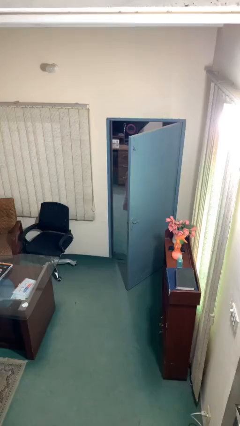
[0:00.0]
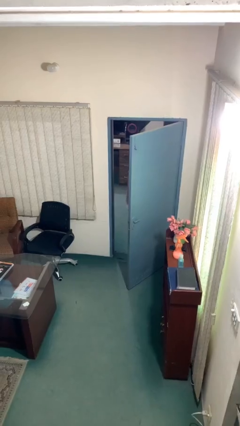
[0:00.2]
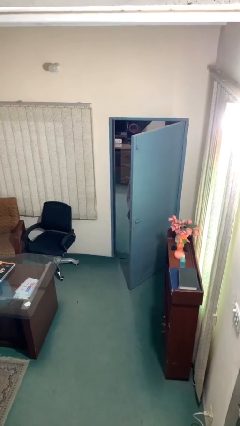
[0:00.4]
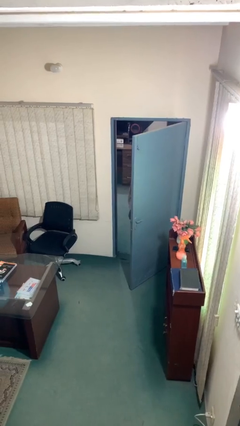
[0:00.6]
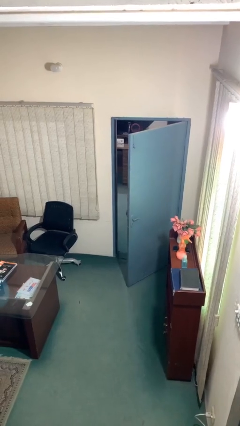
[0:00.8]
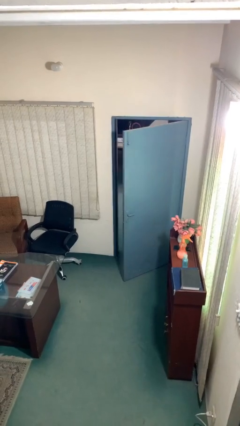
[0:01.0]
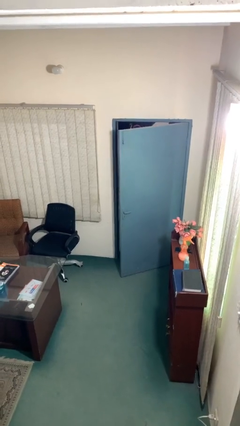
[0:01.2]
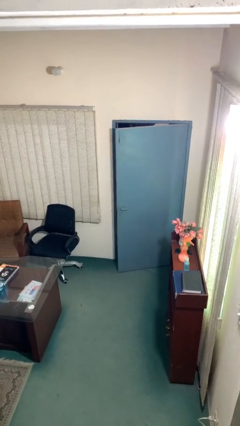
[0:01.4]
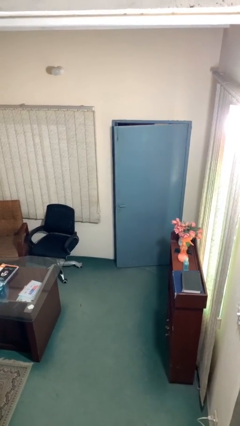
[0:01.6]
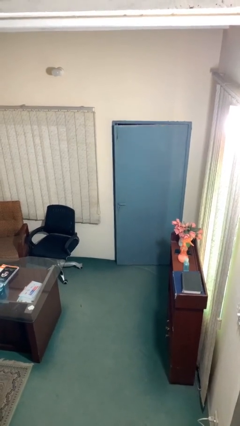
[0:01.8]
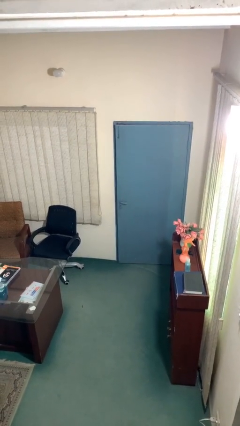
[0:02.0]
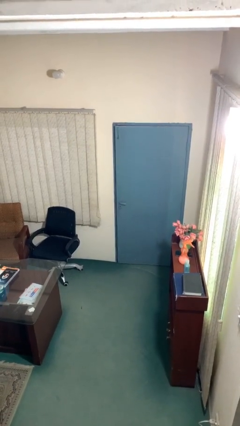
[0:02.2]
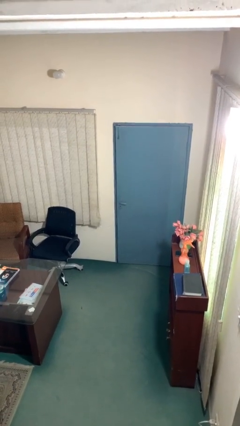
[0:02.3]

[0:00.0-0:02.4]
person closes facility door

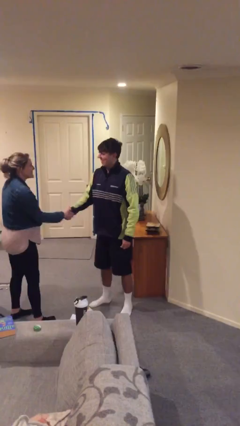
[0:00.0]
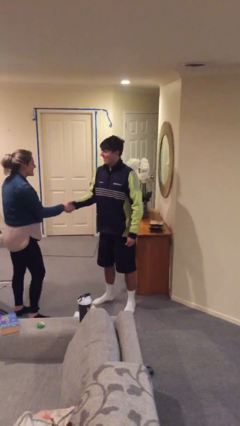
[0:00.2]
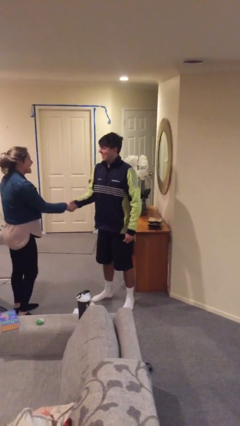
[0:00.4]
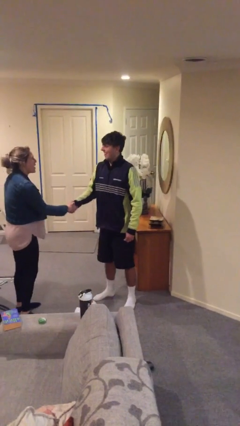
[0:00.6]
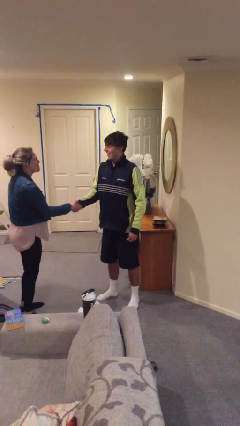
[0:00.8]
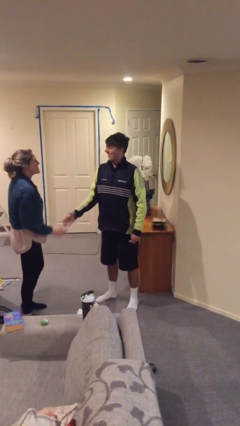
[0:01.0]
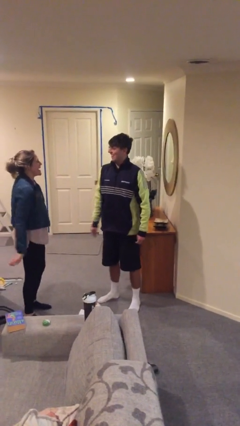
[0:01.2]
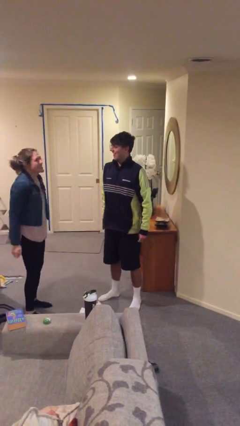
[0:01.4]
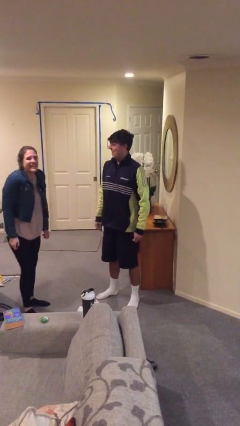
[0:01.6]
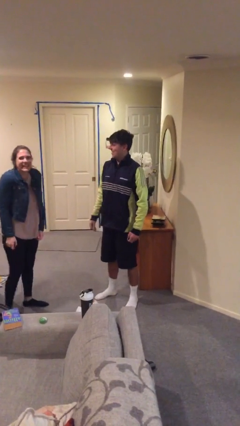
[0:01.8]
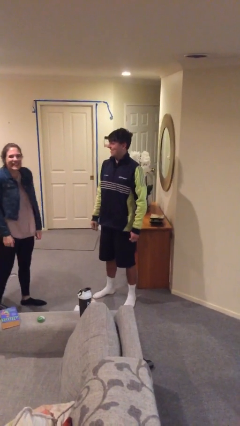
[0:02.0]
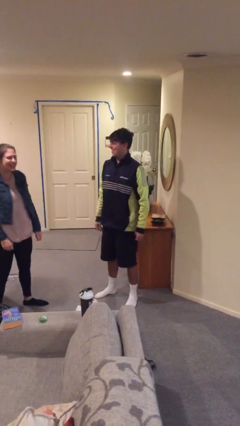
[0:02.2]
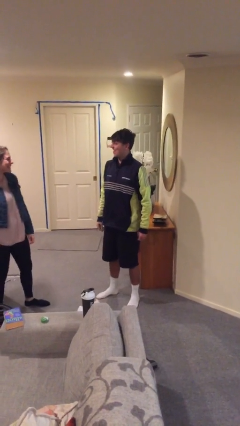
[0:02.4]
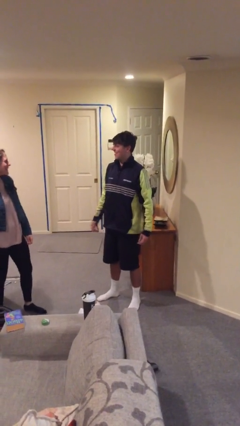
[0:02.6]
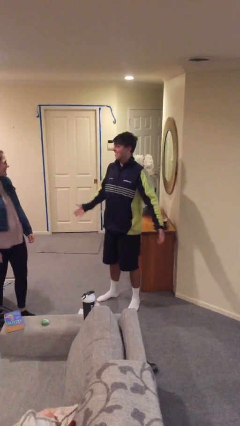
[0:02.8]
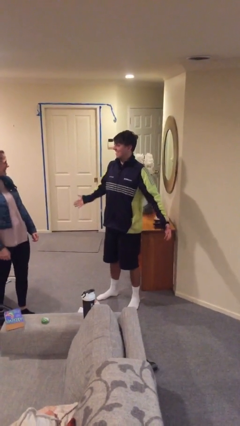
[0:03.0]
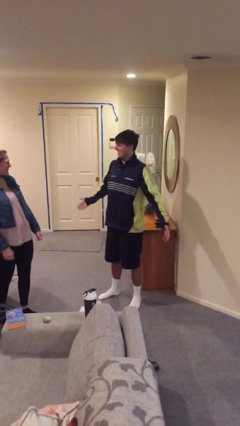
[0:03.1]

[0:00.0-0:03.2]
person talks to person

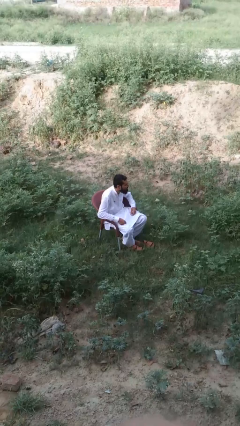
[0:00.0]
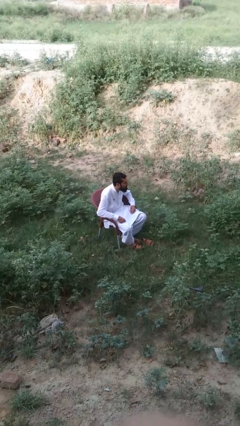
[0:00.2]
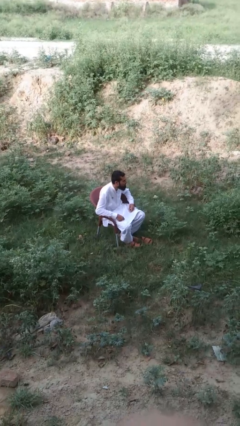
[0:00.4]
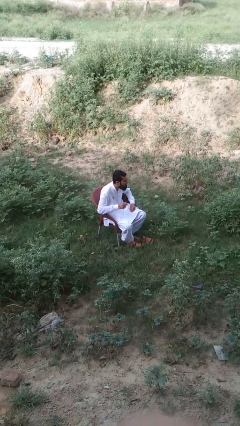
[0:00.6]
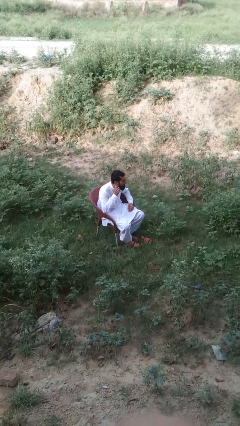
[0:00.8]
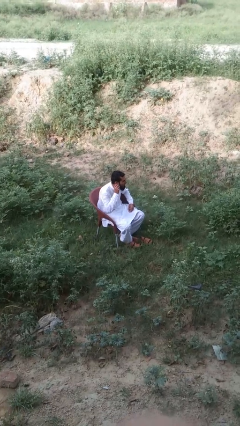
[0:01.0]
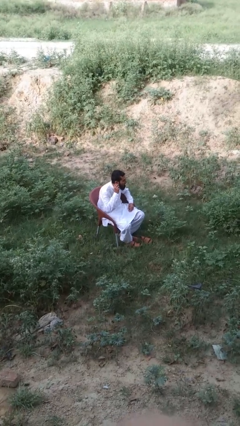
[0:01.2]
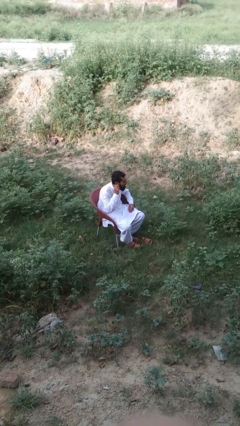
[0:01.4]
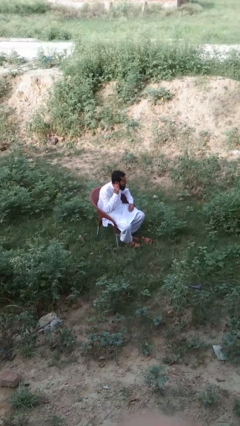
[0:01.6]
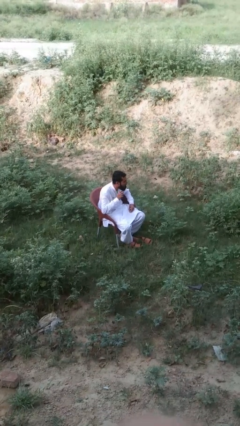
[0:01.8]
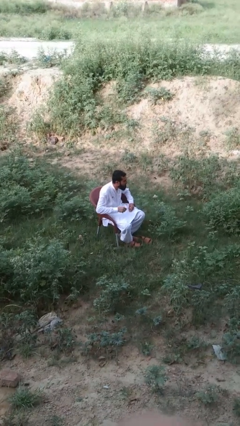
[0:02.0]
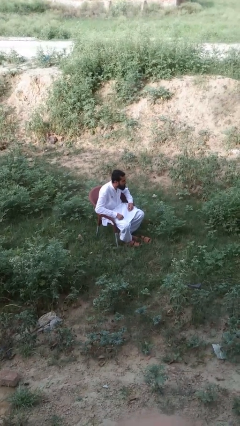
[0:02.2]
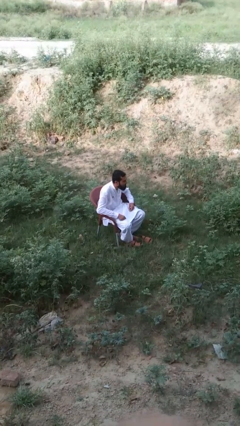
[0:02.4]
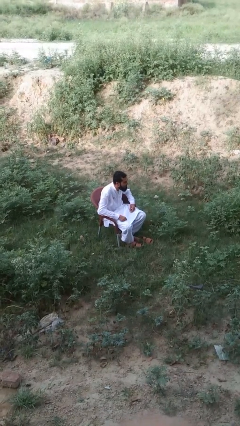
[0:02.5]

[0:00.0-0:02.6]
person touches earlobe

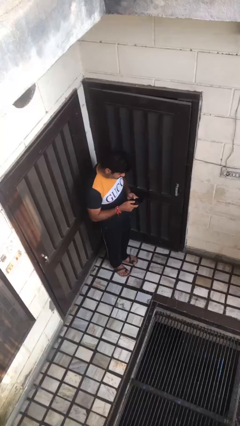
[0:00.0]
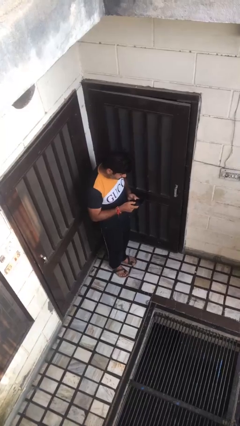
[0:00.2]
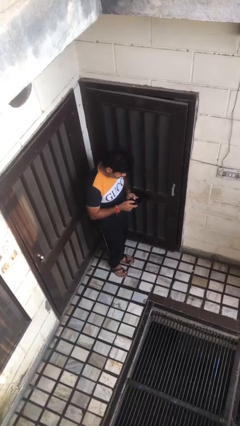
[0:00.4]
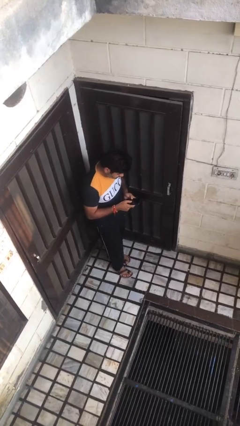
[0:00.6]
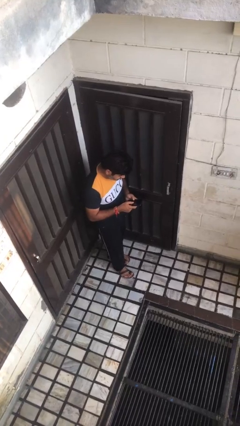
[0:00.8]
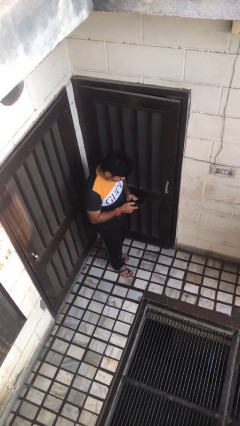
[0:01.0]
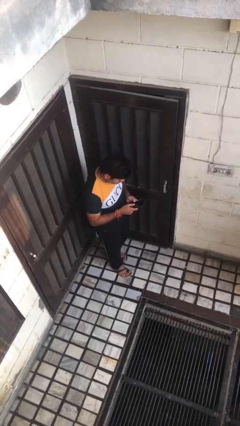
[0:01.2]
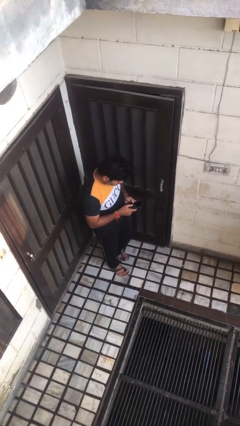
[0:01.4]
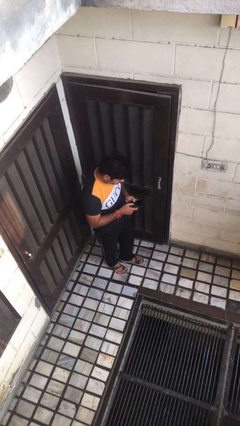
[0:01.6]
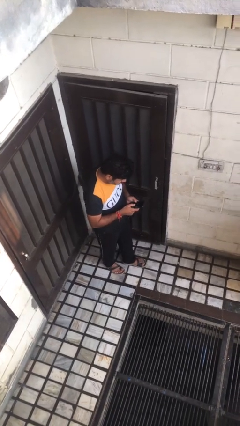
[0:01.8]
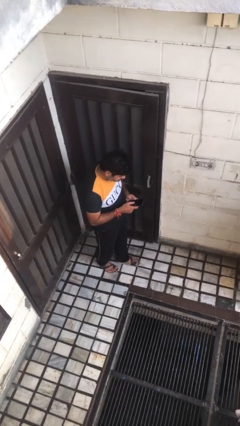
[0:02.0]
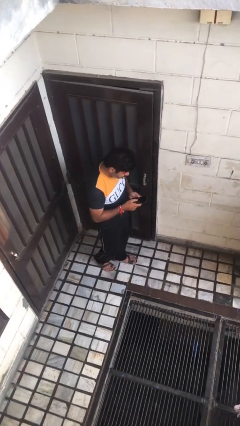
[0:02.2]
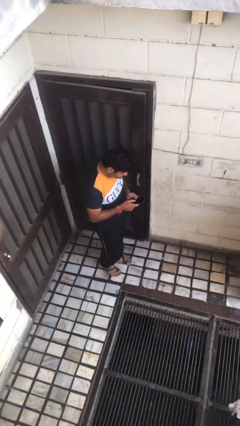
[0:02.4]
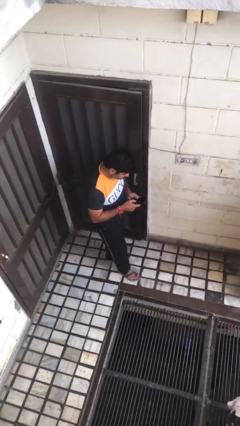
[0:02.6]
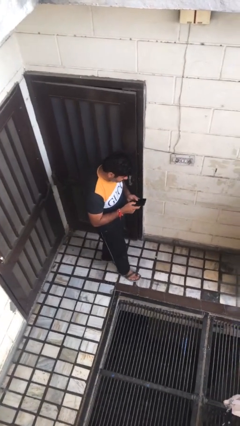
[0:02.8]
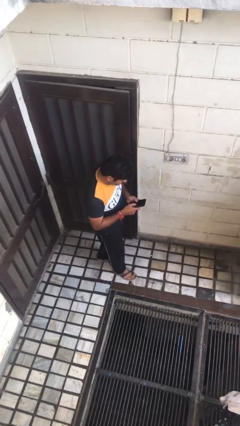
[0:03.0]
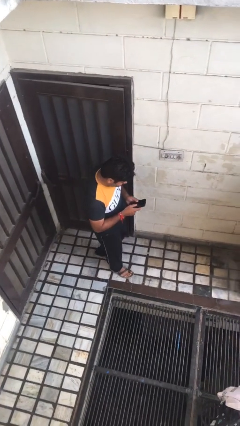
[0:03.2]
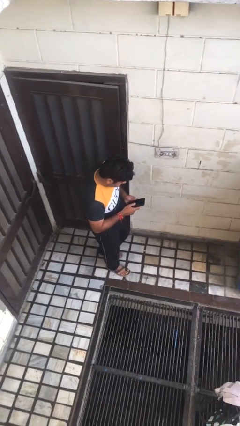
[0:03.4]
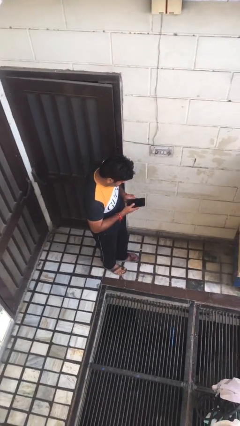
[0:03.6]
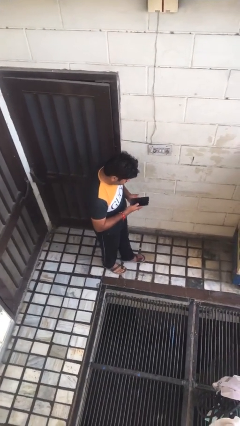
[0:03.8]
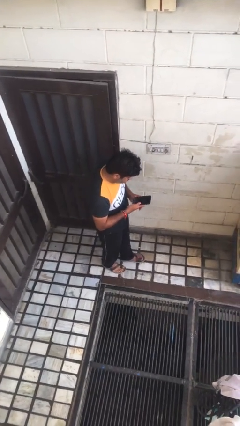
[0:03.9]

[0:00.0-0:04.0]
person texts on phone

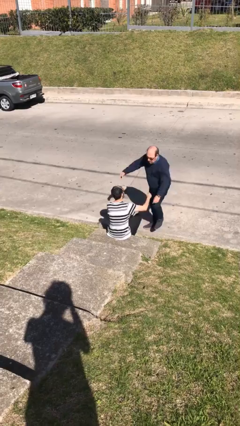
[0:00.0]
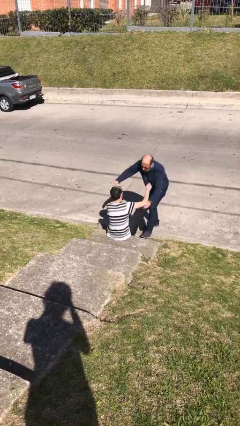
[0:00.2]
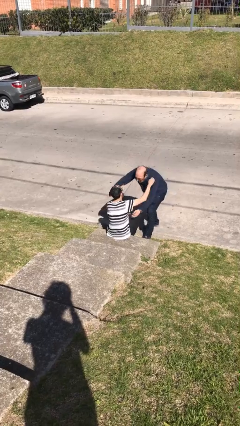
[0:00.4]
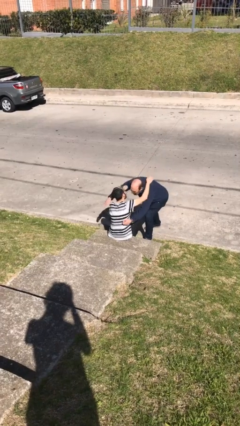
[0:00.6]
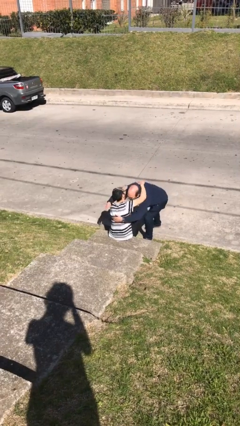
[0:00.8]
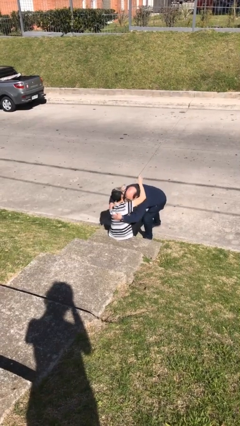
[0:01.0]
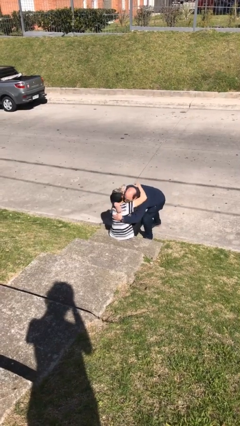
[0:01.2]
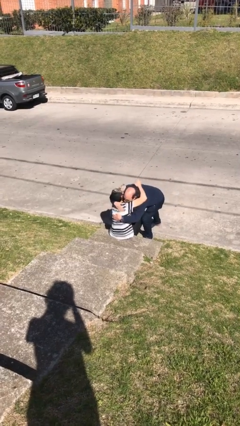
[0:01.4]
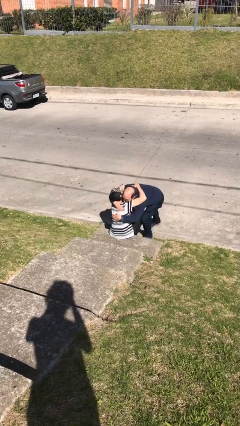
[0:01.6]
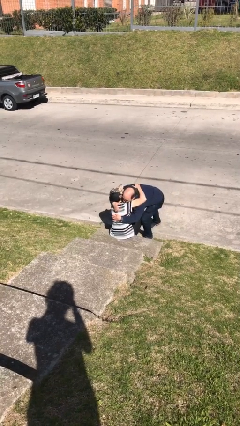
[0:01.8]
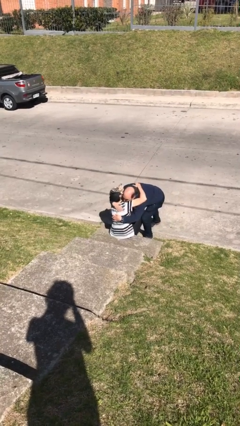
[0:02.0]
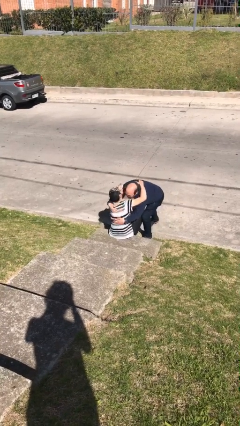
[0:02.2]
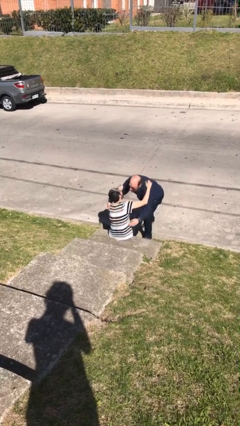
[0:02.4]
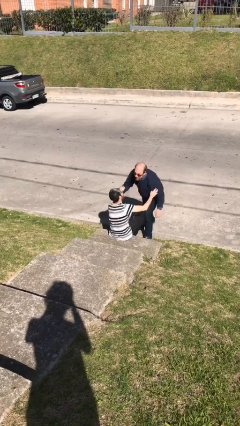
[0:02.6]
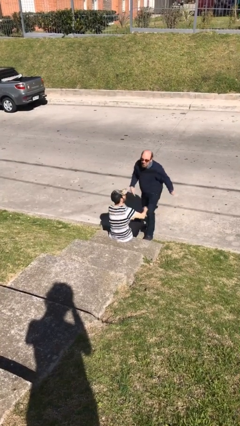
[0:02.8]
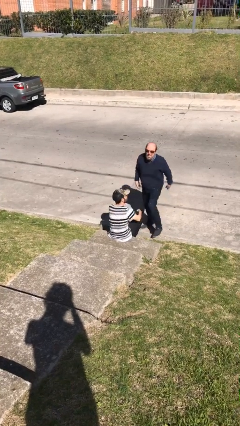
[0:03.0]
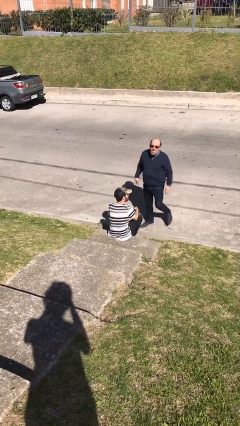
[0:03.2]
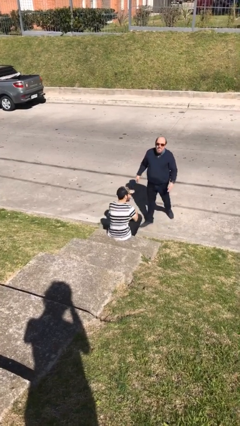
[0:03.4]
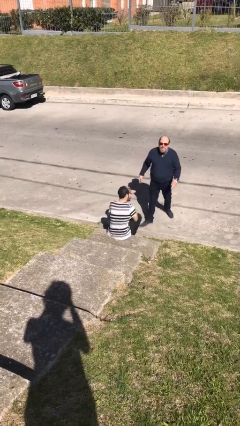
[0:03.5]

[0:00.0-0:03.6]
person embraces person

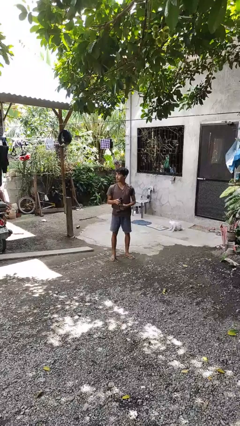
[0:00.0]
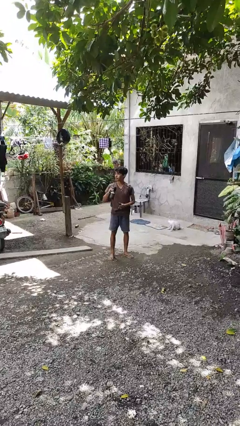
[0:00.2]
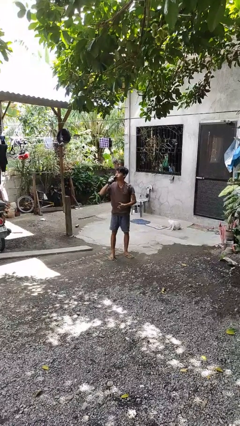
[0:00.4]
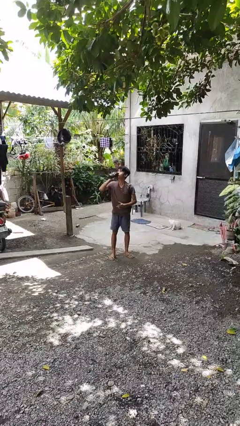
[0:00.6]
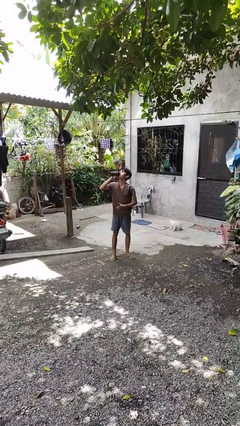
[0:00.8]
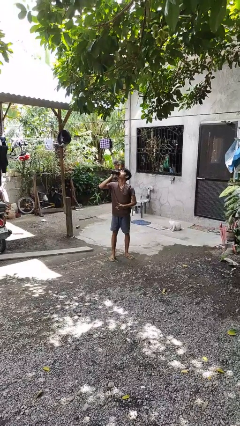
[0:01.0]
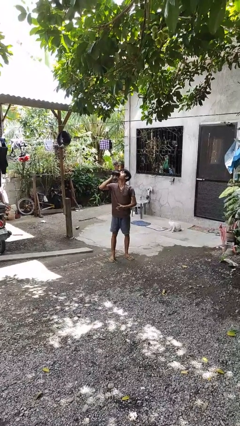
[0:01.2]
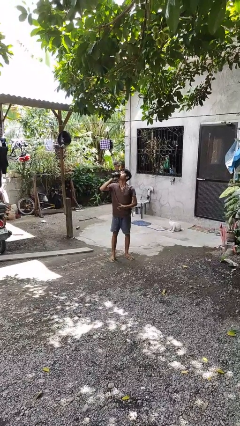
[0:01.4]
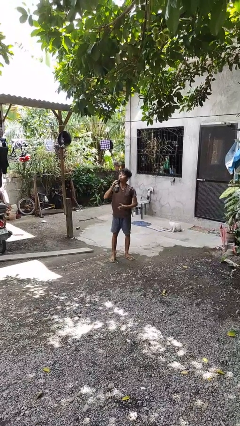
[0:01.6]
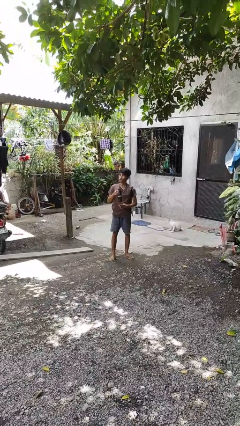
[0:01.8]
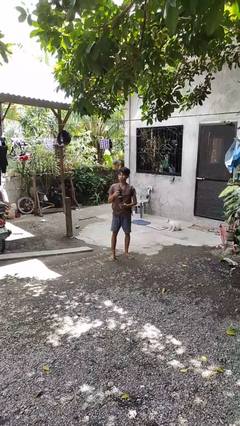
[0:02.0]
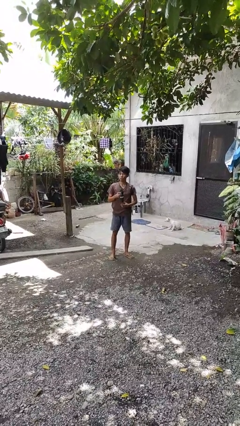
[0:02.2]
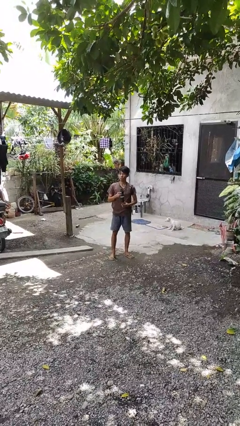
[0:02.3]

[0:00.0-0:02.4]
person drinks from bottle
